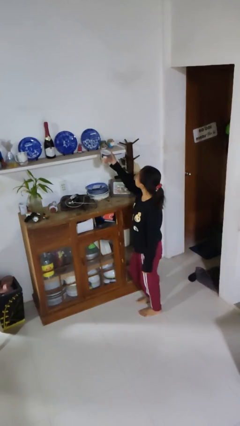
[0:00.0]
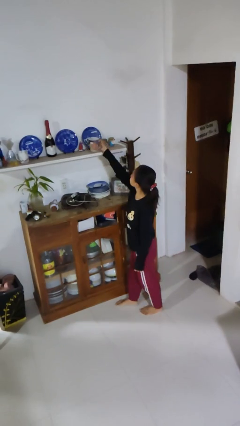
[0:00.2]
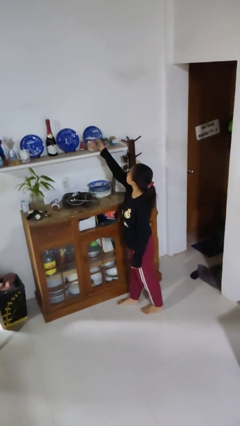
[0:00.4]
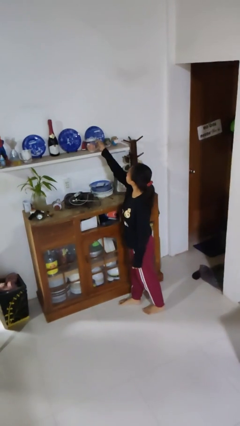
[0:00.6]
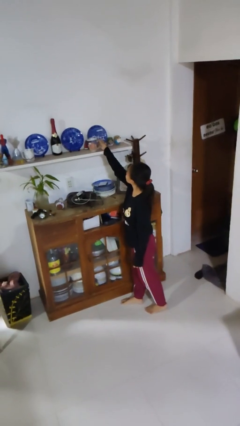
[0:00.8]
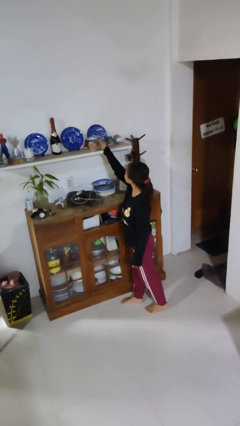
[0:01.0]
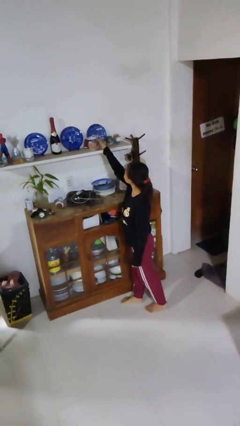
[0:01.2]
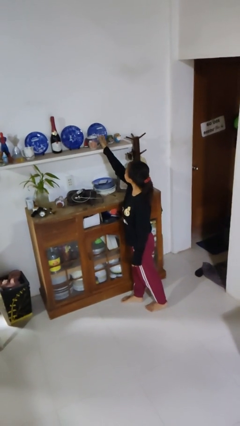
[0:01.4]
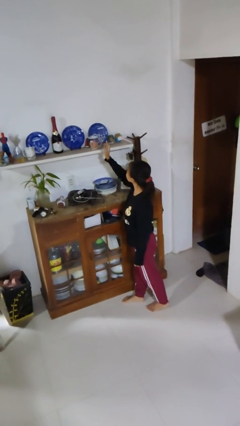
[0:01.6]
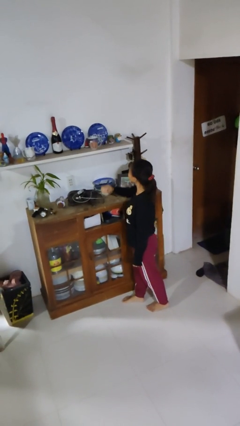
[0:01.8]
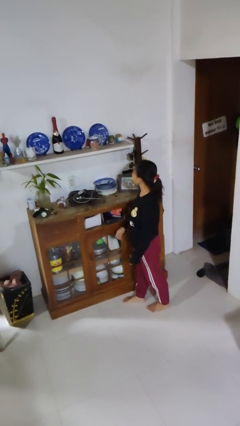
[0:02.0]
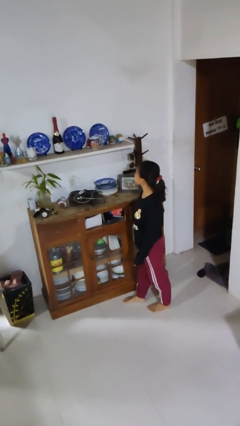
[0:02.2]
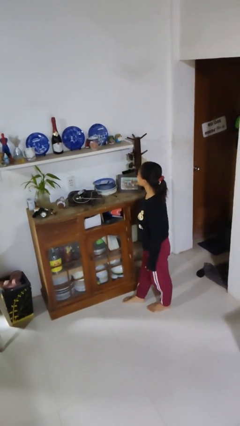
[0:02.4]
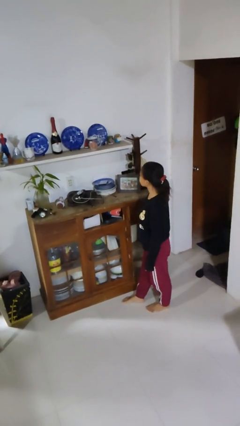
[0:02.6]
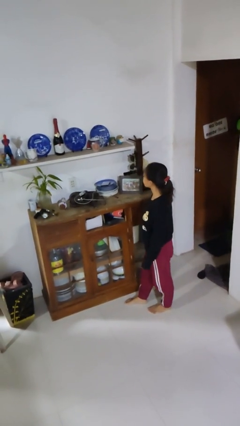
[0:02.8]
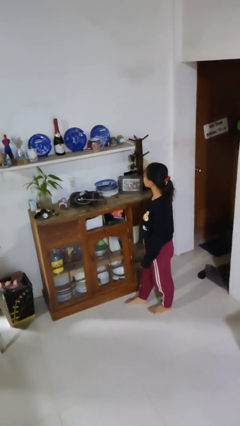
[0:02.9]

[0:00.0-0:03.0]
person puts down object on shelf

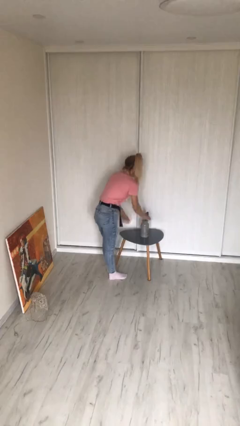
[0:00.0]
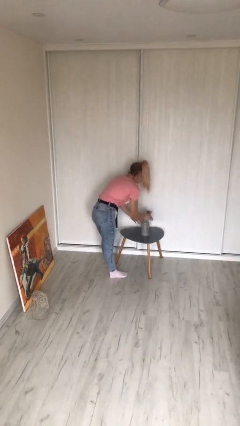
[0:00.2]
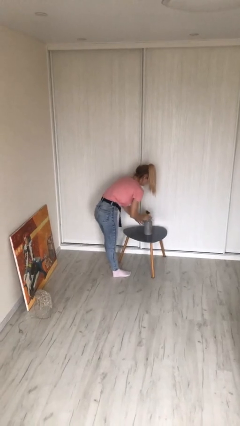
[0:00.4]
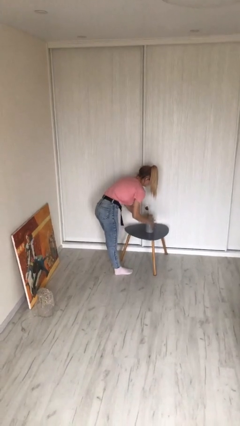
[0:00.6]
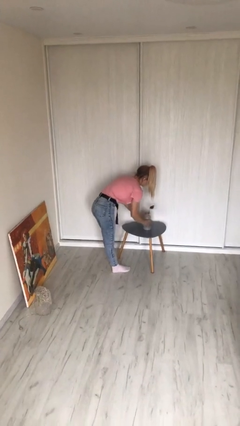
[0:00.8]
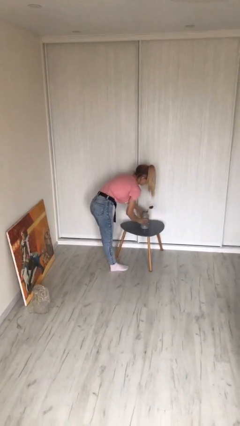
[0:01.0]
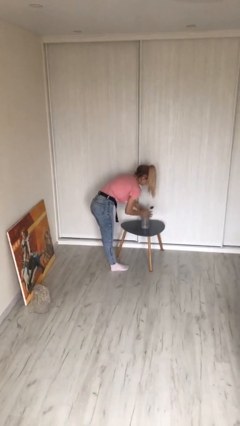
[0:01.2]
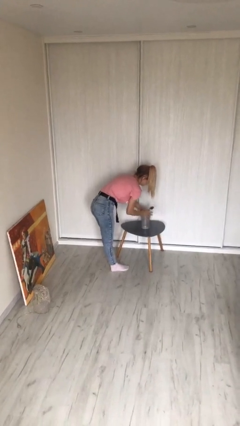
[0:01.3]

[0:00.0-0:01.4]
person arranges flowers in vase

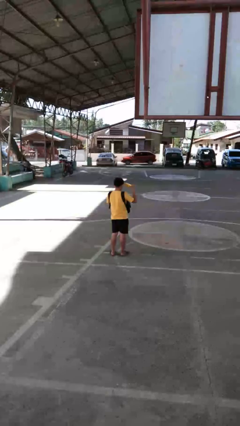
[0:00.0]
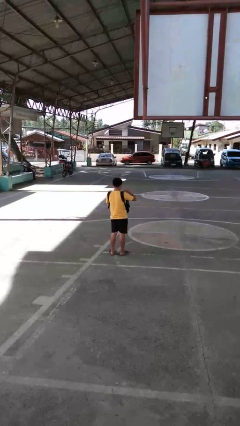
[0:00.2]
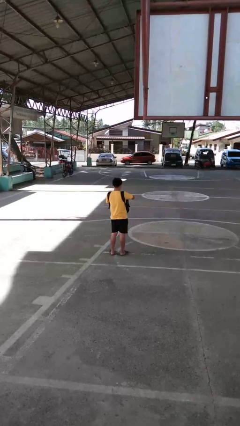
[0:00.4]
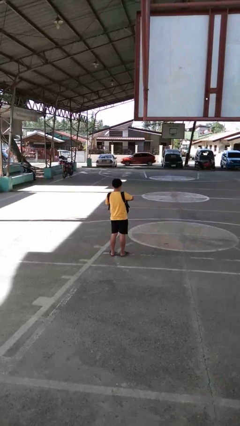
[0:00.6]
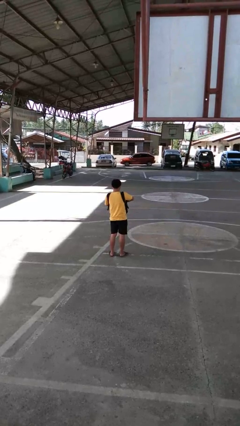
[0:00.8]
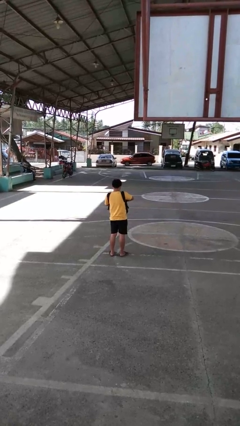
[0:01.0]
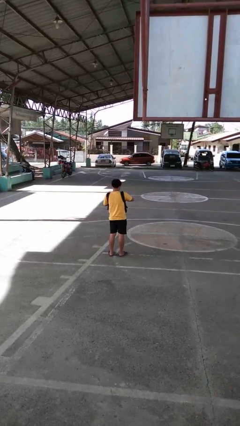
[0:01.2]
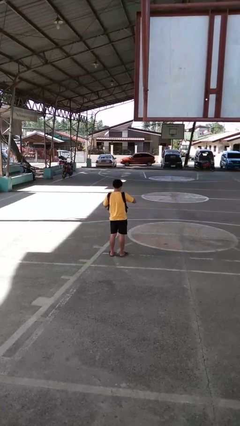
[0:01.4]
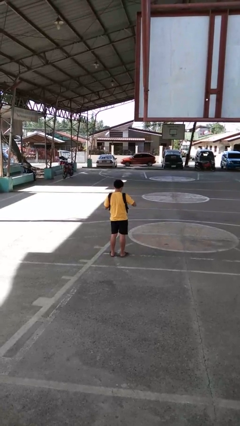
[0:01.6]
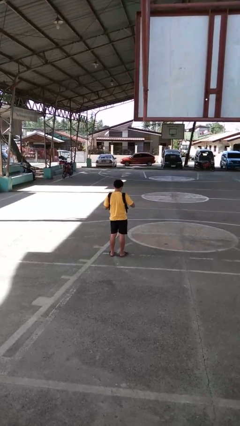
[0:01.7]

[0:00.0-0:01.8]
person puts object into backpack

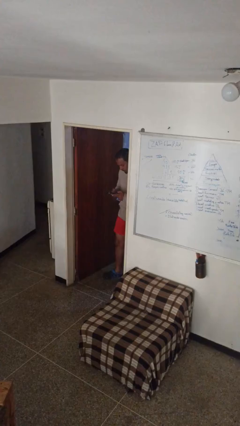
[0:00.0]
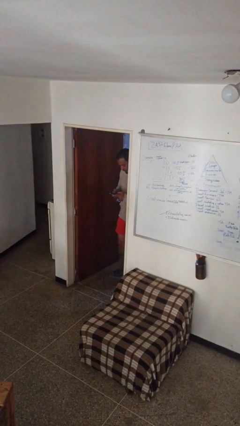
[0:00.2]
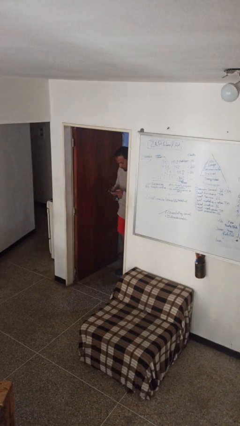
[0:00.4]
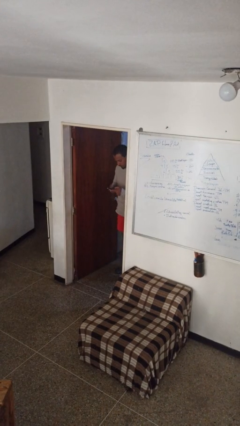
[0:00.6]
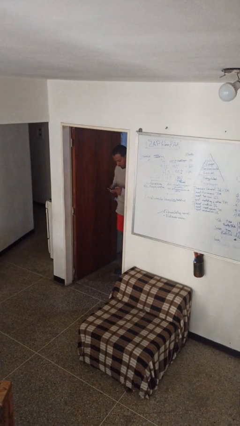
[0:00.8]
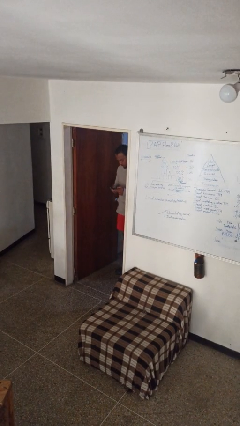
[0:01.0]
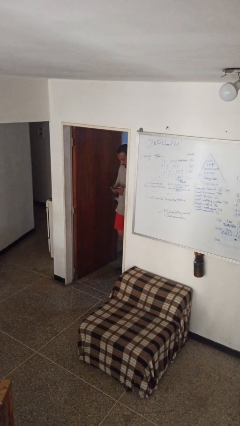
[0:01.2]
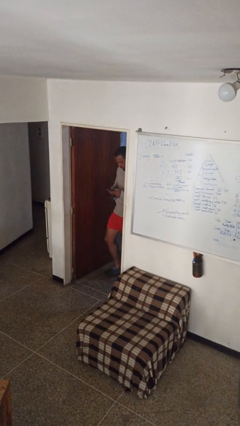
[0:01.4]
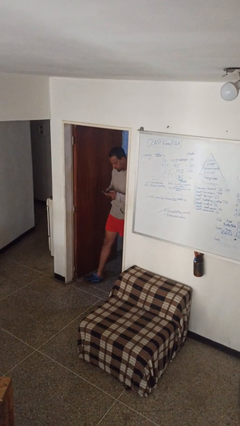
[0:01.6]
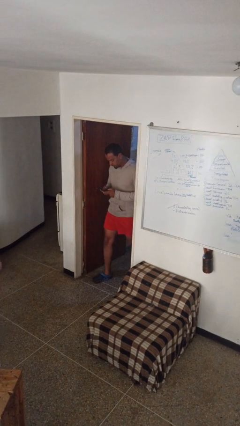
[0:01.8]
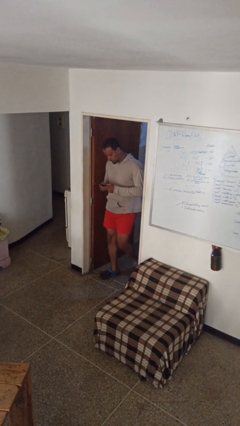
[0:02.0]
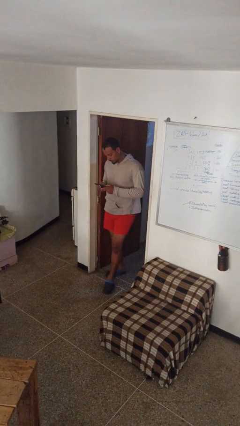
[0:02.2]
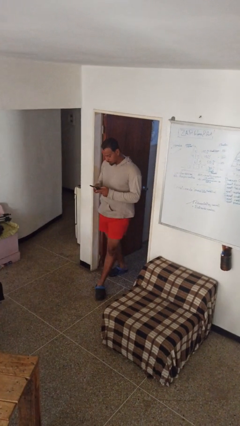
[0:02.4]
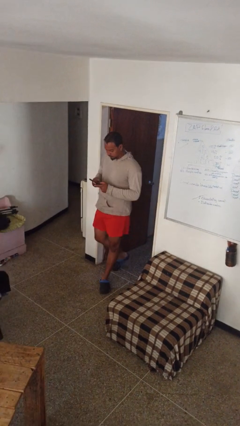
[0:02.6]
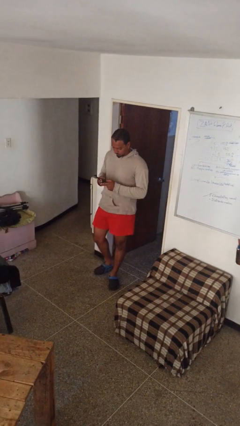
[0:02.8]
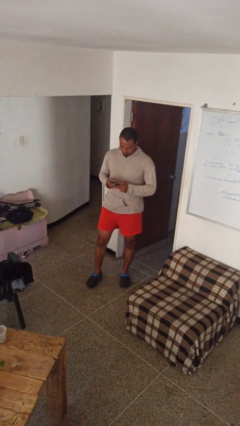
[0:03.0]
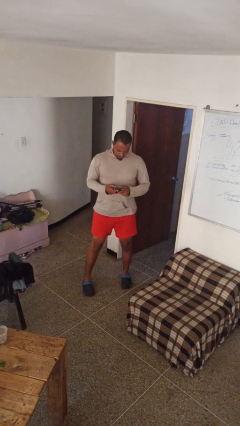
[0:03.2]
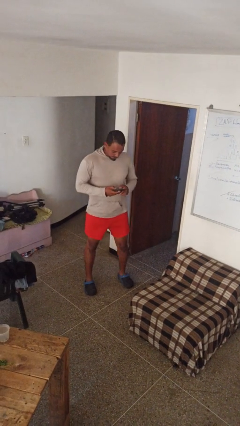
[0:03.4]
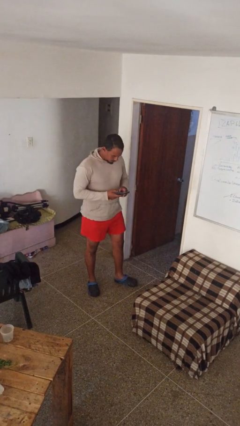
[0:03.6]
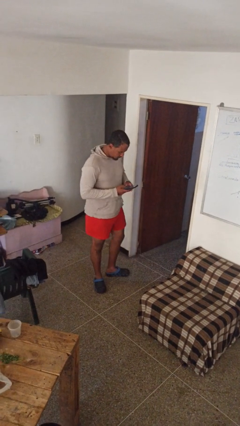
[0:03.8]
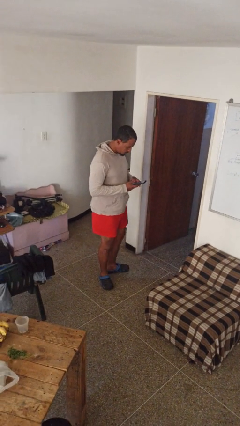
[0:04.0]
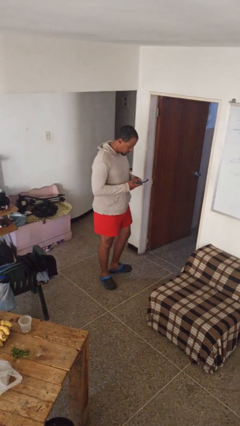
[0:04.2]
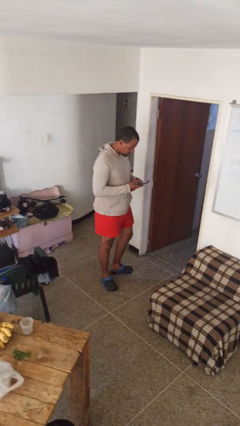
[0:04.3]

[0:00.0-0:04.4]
person enters scene through structure

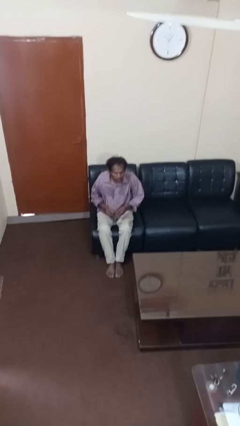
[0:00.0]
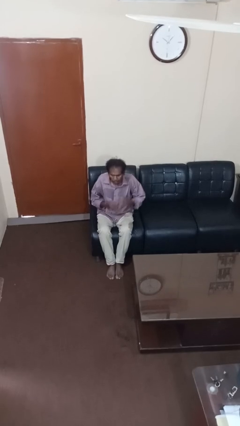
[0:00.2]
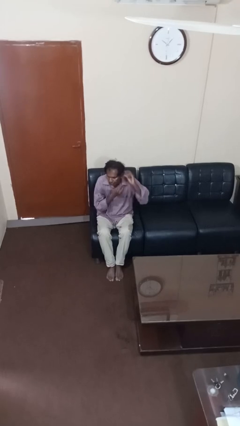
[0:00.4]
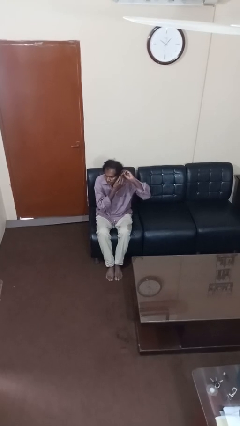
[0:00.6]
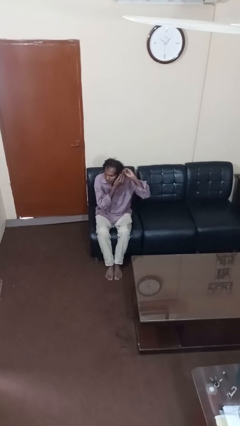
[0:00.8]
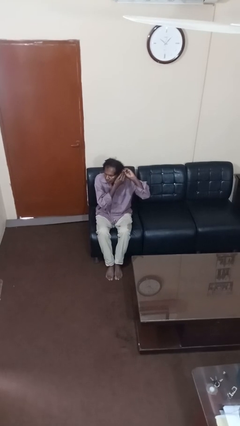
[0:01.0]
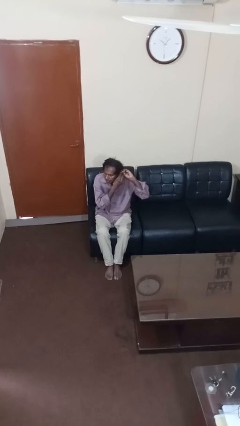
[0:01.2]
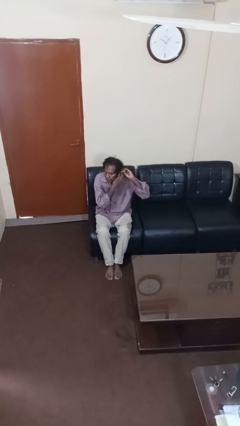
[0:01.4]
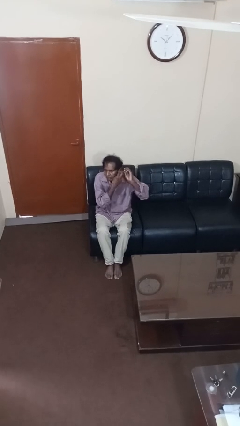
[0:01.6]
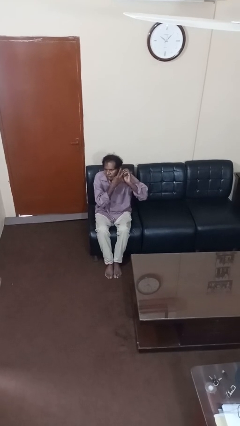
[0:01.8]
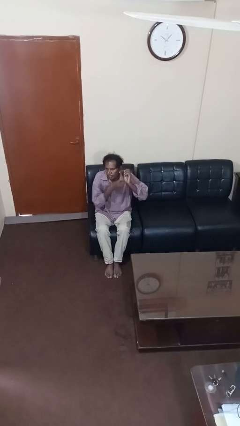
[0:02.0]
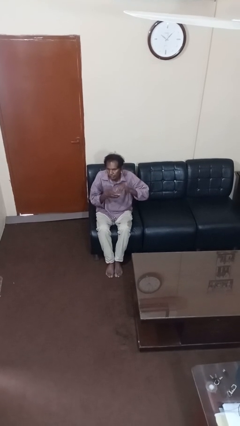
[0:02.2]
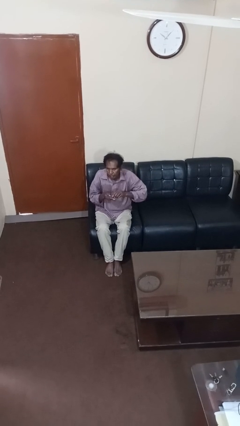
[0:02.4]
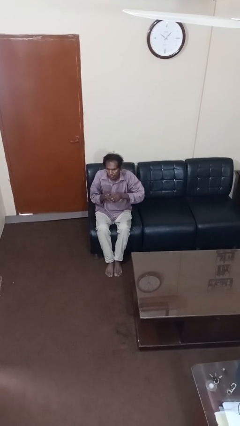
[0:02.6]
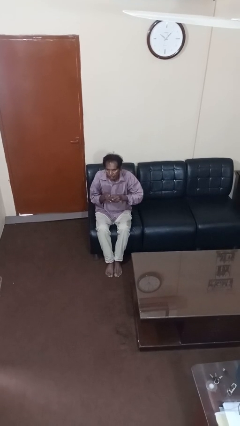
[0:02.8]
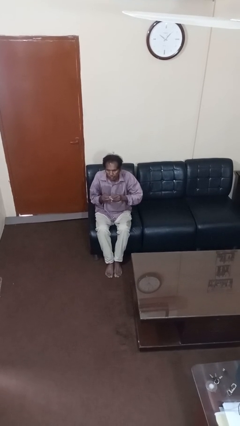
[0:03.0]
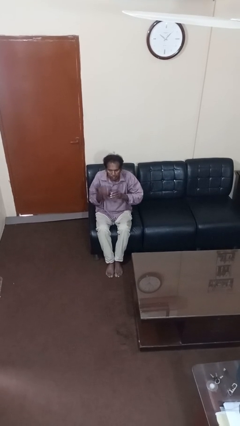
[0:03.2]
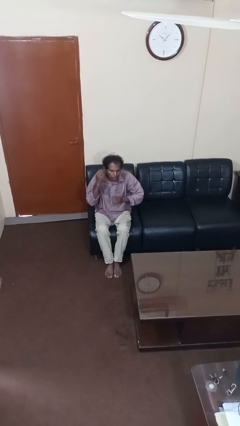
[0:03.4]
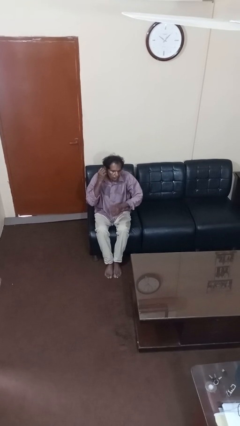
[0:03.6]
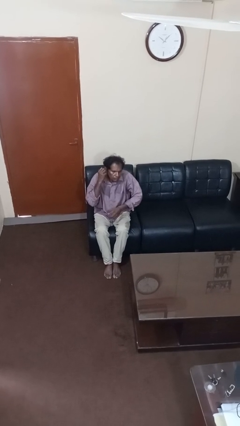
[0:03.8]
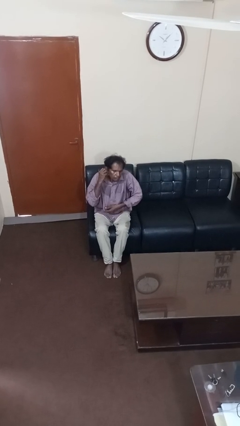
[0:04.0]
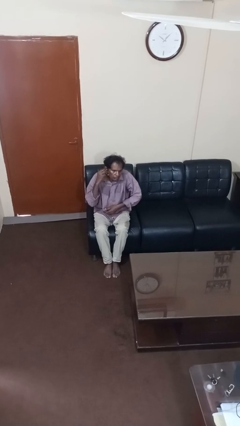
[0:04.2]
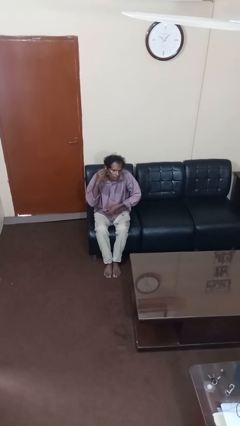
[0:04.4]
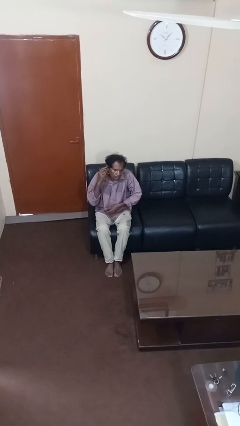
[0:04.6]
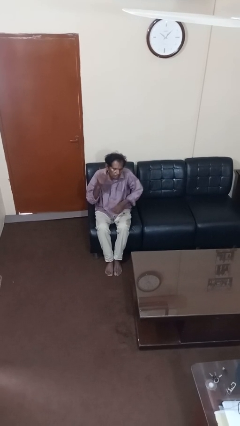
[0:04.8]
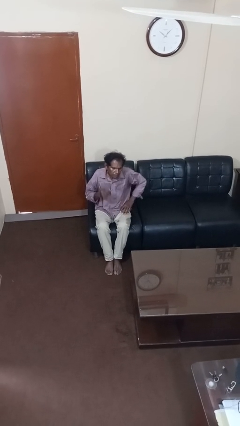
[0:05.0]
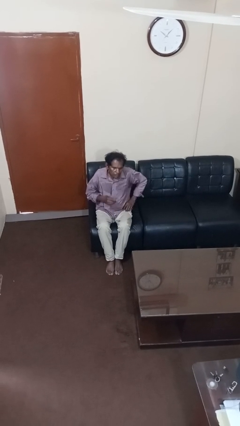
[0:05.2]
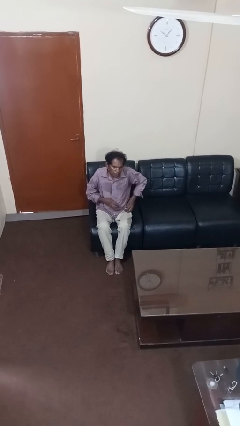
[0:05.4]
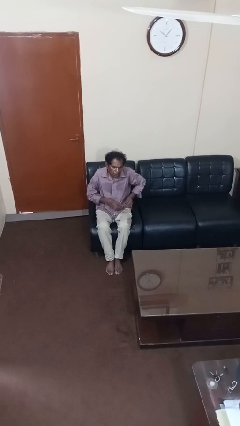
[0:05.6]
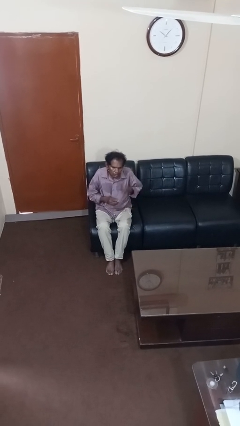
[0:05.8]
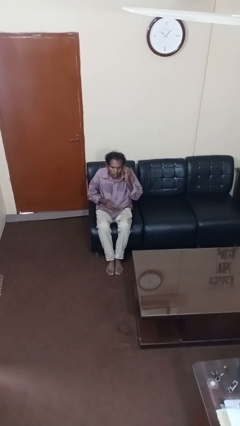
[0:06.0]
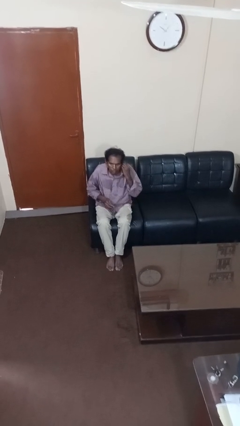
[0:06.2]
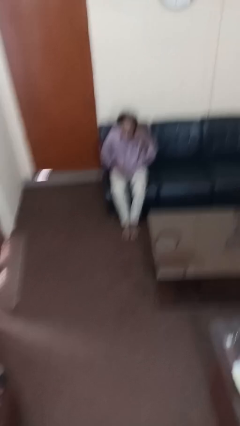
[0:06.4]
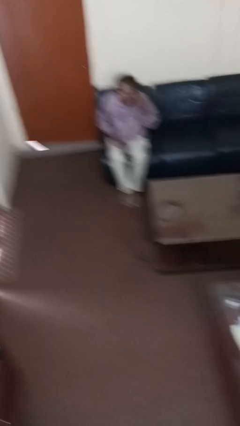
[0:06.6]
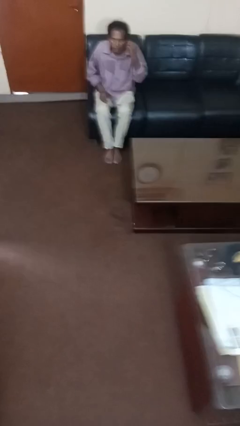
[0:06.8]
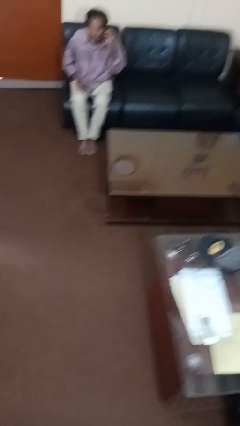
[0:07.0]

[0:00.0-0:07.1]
person puts on earrings
